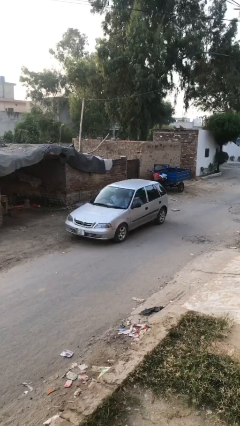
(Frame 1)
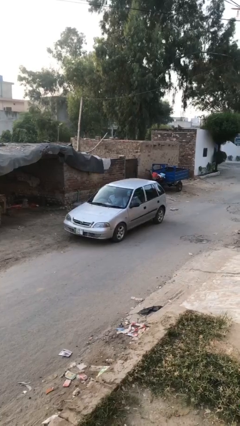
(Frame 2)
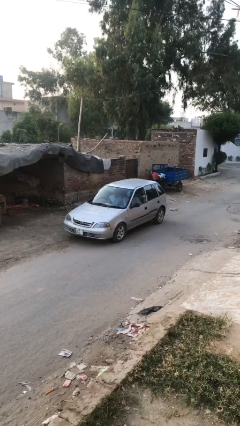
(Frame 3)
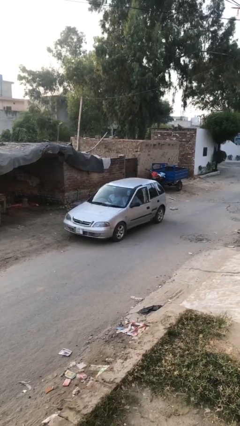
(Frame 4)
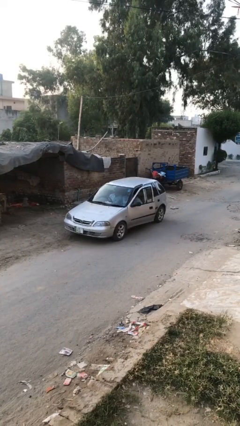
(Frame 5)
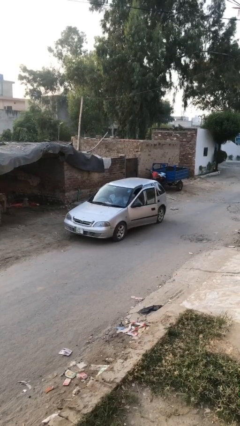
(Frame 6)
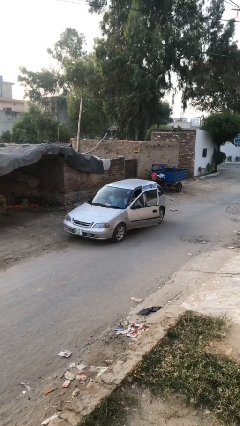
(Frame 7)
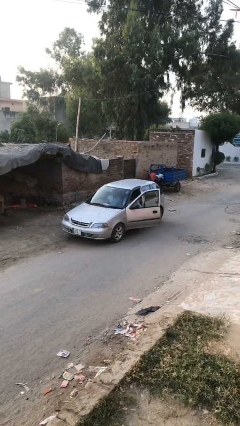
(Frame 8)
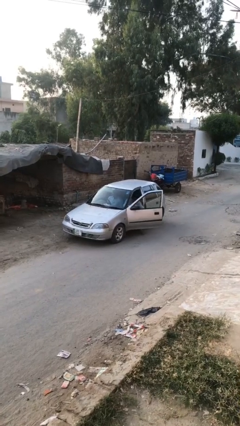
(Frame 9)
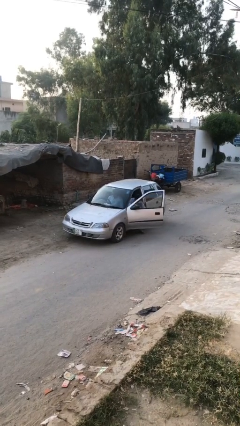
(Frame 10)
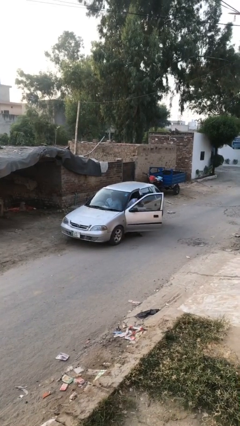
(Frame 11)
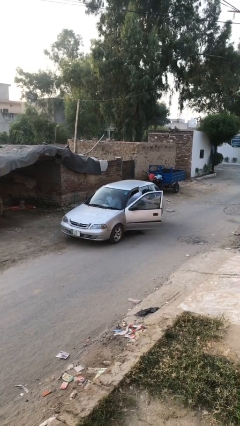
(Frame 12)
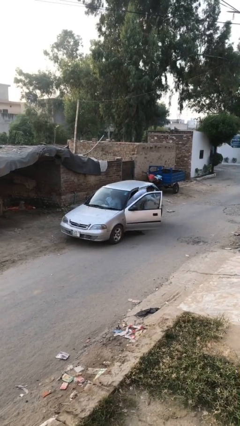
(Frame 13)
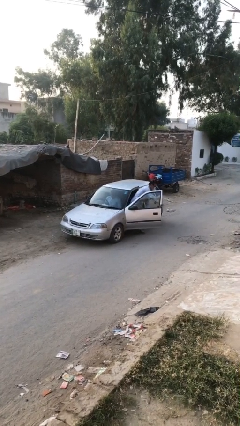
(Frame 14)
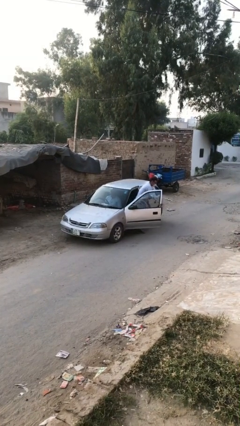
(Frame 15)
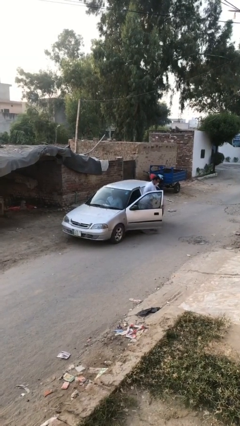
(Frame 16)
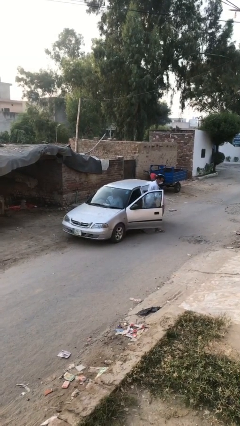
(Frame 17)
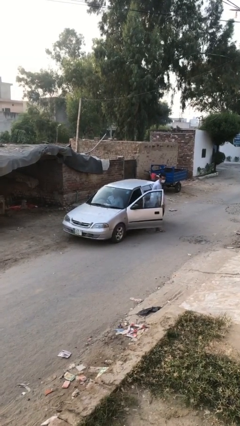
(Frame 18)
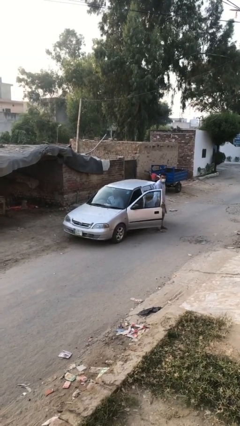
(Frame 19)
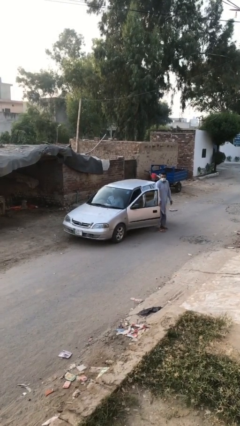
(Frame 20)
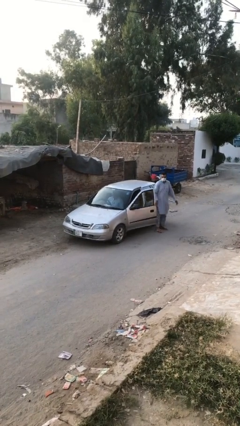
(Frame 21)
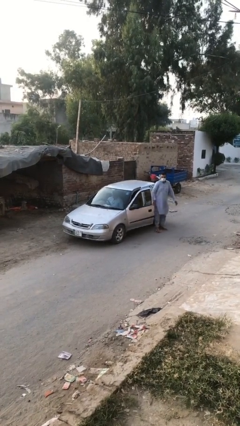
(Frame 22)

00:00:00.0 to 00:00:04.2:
car drops off person

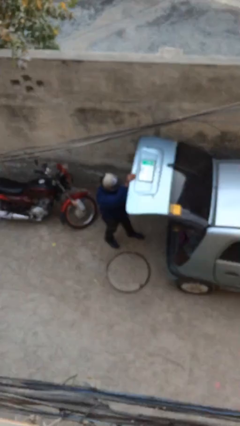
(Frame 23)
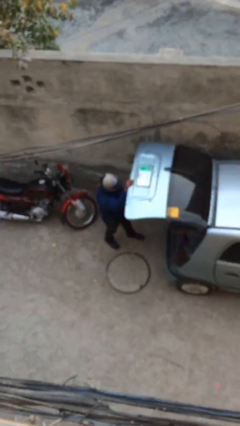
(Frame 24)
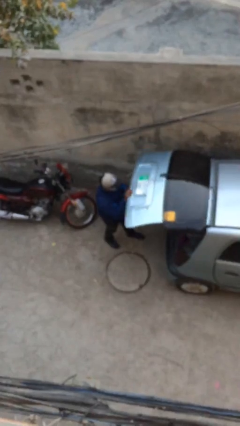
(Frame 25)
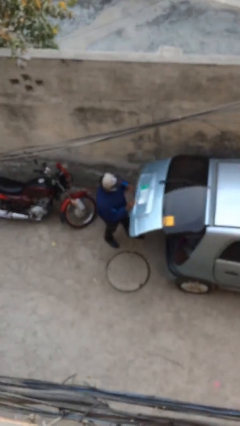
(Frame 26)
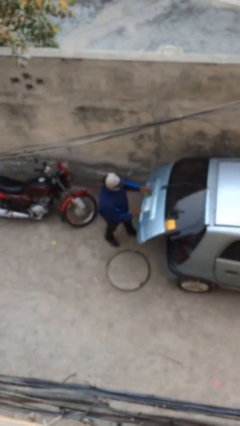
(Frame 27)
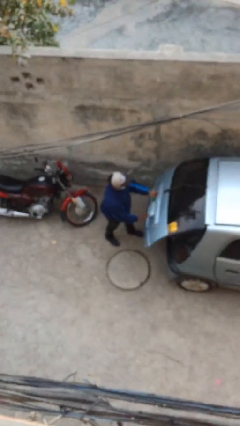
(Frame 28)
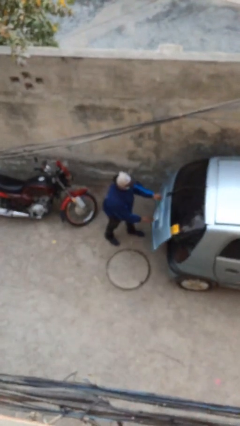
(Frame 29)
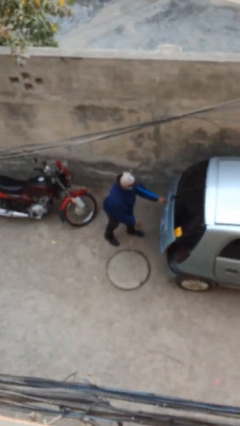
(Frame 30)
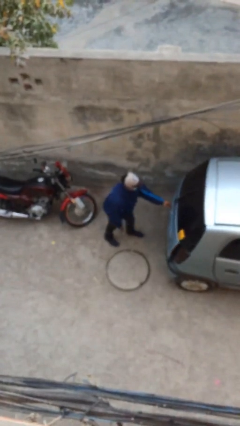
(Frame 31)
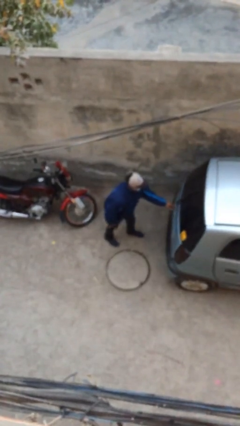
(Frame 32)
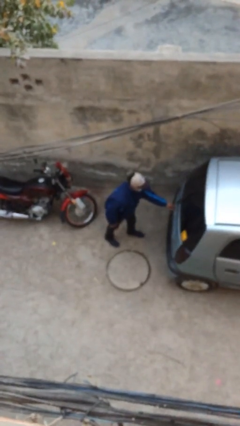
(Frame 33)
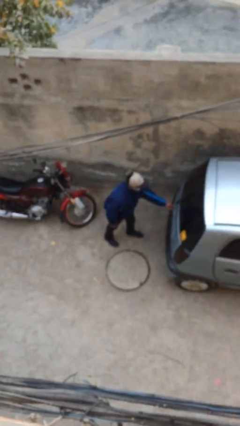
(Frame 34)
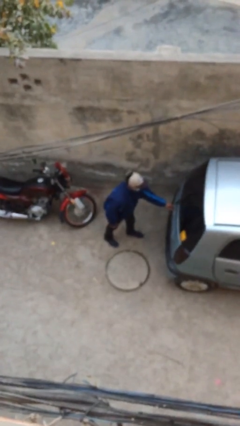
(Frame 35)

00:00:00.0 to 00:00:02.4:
person closes car trunk

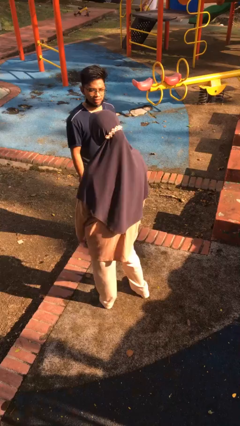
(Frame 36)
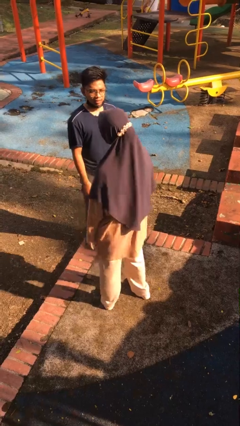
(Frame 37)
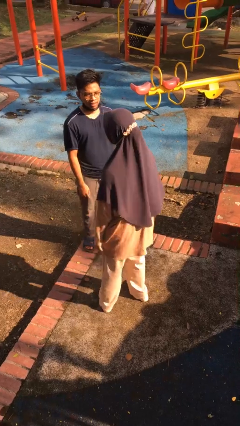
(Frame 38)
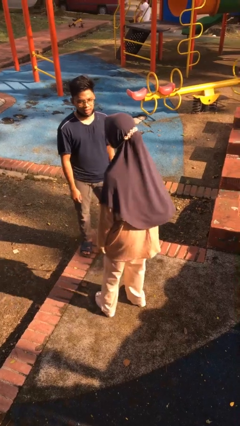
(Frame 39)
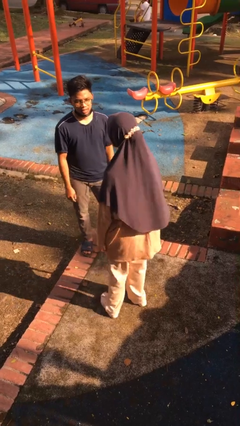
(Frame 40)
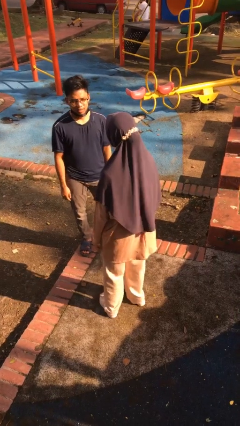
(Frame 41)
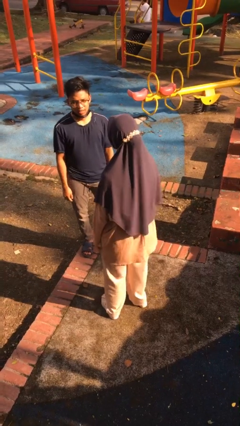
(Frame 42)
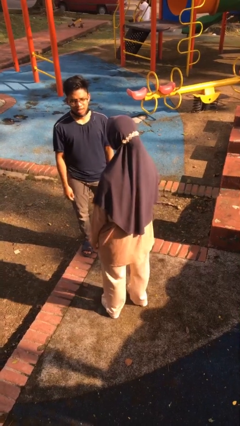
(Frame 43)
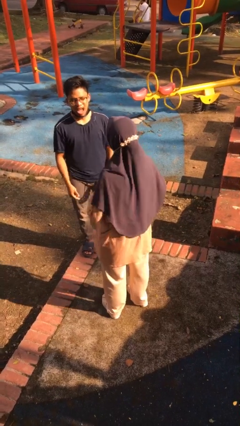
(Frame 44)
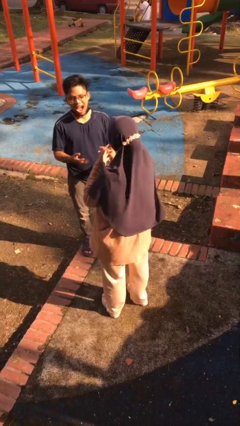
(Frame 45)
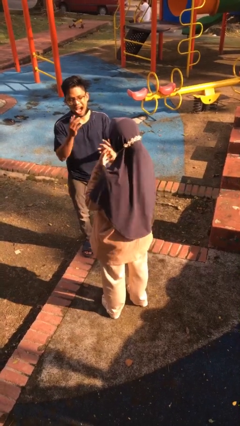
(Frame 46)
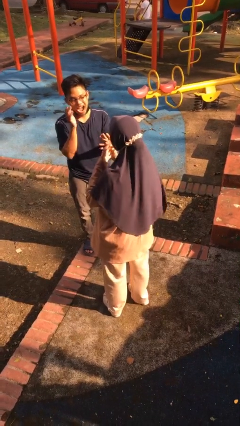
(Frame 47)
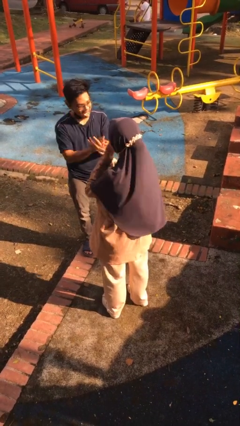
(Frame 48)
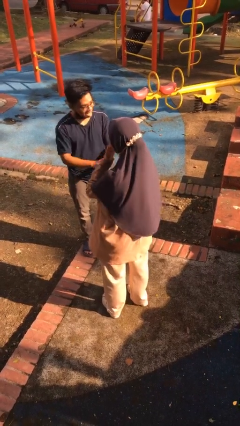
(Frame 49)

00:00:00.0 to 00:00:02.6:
person laughs with person

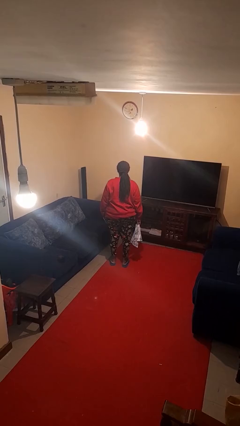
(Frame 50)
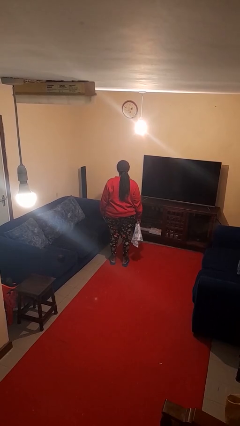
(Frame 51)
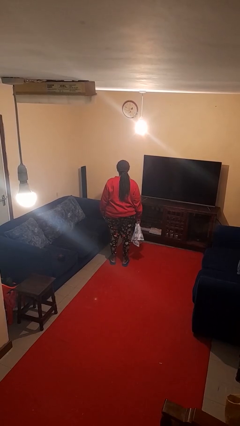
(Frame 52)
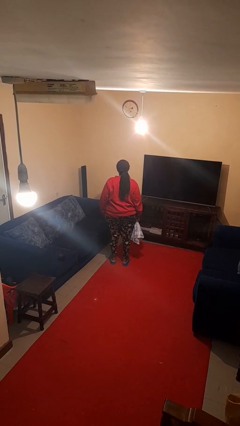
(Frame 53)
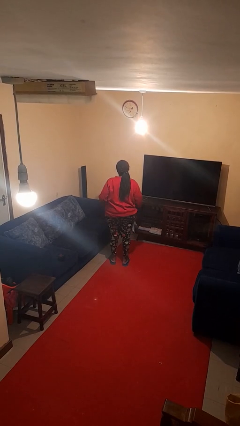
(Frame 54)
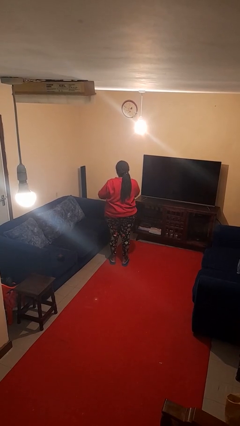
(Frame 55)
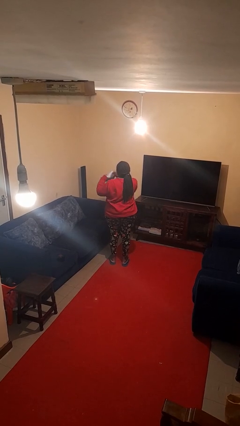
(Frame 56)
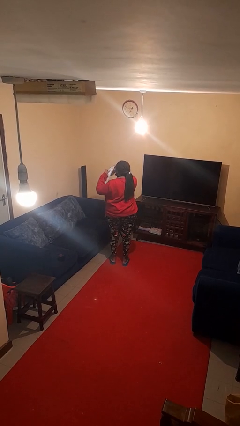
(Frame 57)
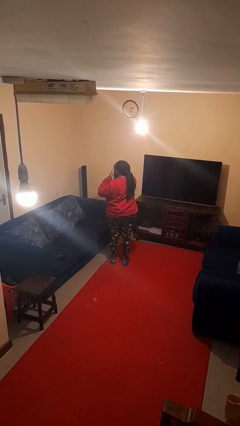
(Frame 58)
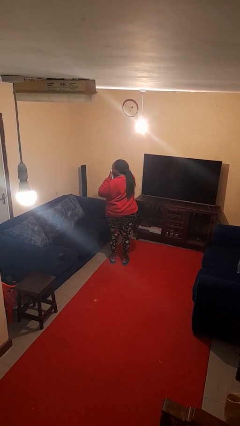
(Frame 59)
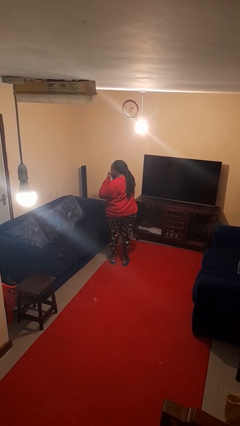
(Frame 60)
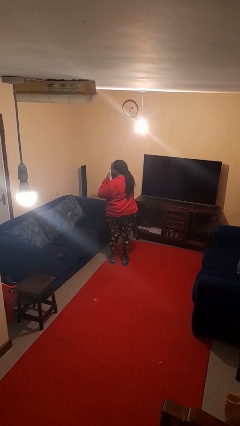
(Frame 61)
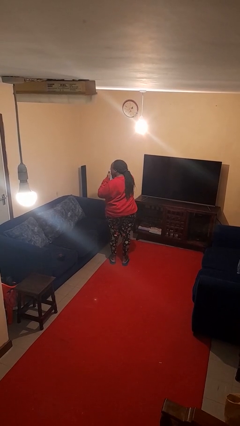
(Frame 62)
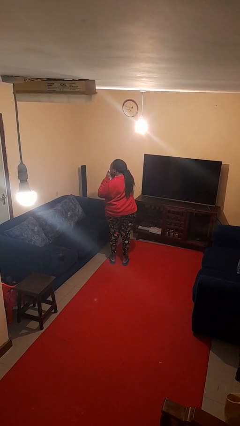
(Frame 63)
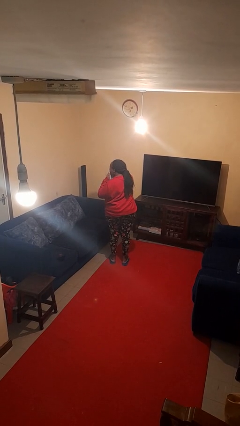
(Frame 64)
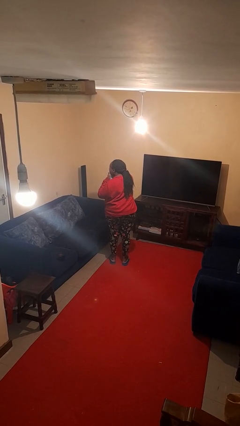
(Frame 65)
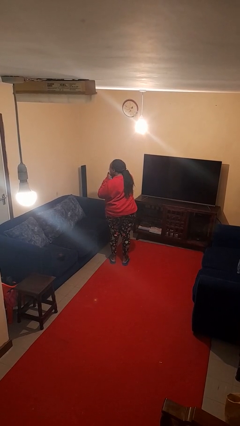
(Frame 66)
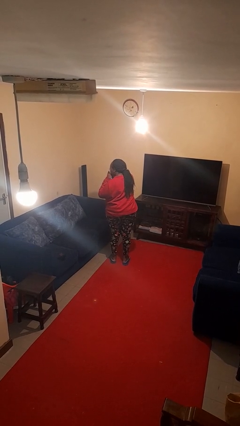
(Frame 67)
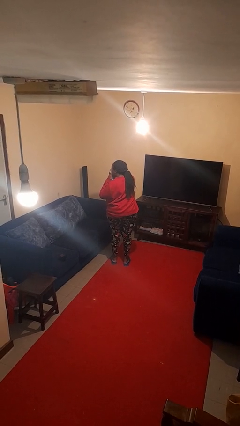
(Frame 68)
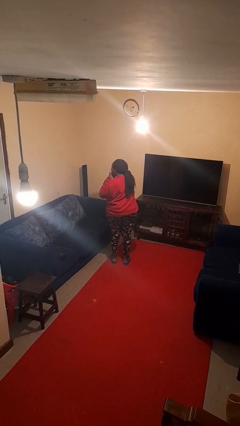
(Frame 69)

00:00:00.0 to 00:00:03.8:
person blows nose

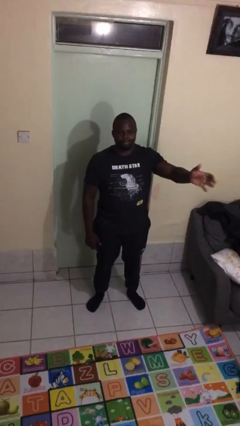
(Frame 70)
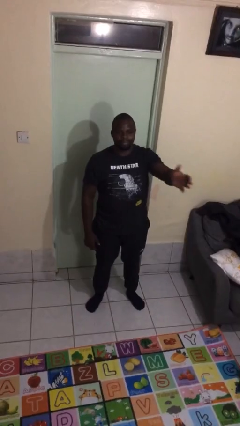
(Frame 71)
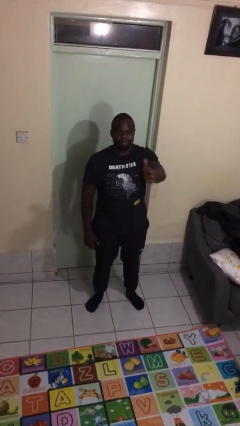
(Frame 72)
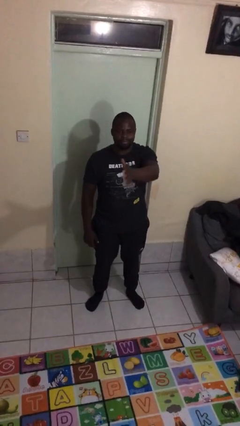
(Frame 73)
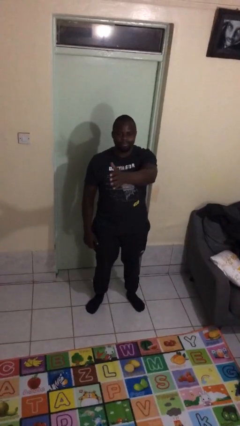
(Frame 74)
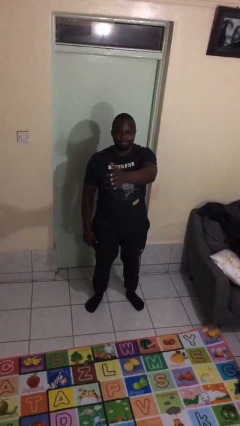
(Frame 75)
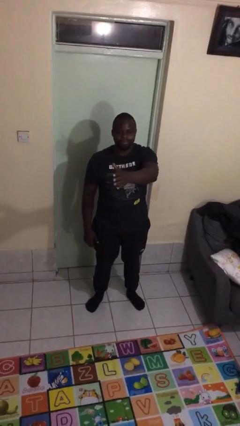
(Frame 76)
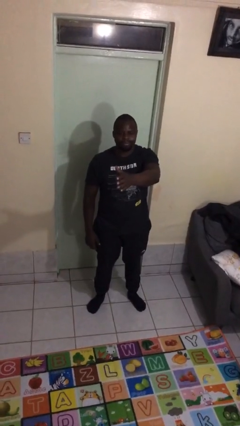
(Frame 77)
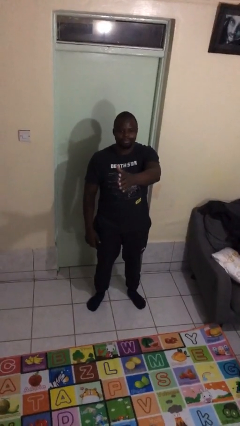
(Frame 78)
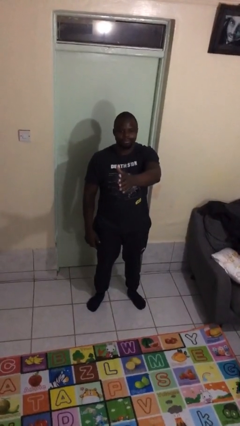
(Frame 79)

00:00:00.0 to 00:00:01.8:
person gestures swipe right

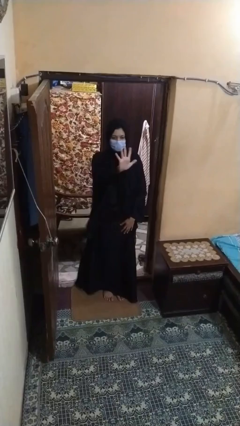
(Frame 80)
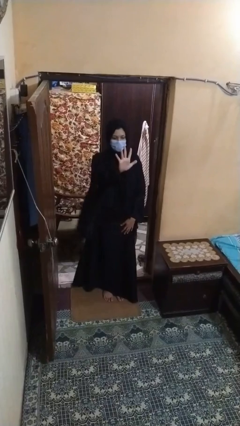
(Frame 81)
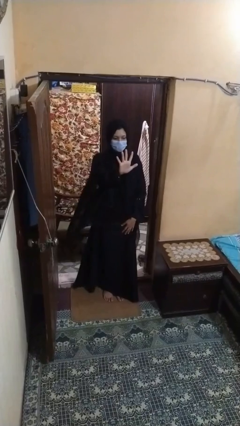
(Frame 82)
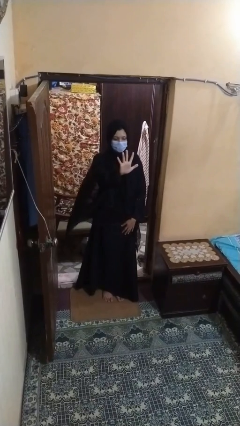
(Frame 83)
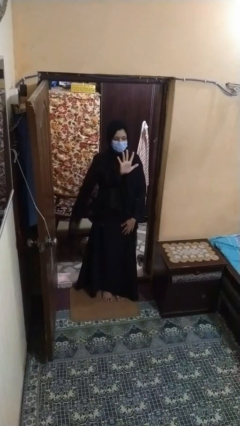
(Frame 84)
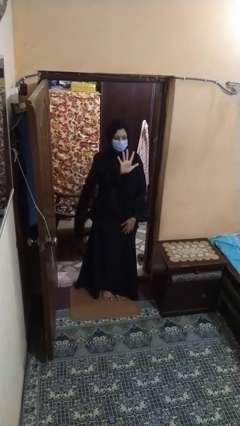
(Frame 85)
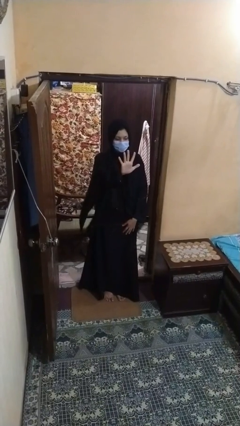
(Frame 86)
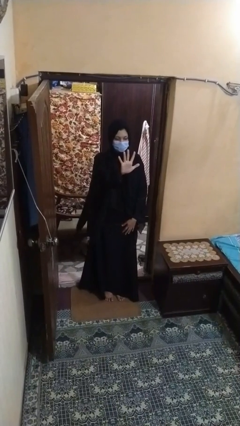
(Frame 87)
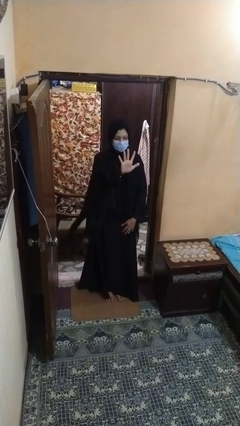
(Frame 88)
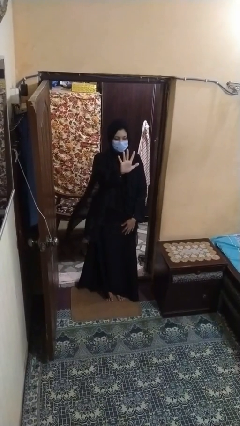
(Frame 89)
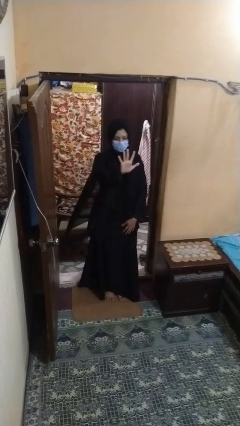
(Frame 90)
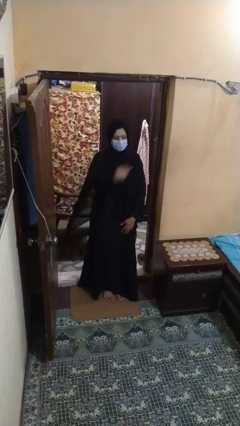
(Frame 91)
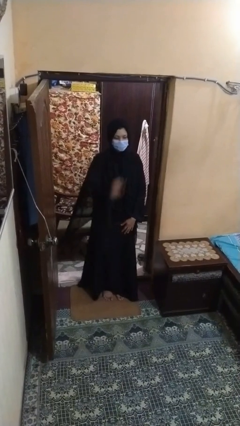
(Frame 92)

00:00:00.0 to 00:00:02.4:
person gestures number five
